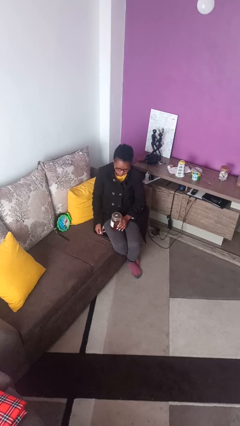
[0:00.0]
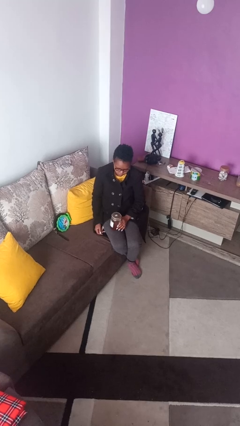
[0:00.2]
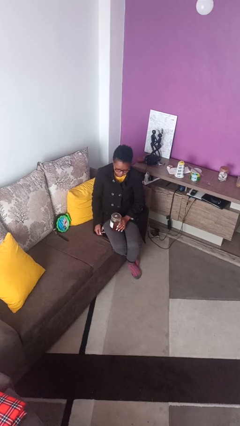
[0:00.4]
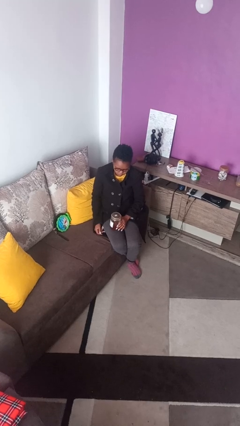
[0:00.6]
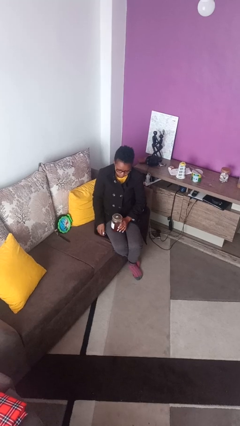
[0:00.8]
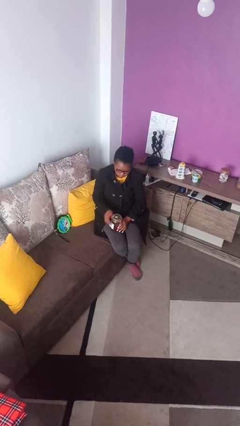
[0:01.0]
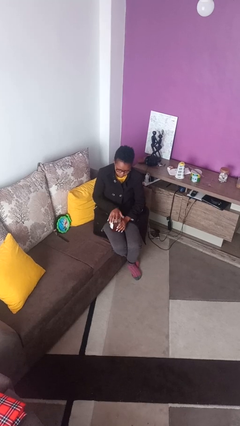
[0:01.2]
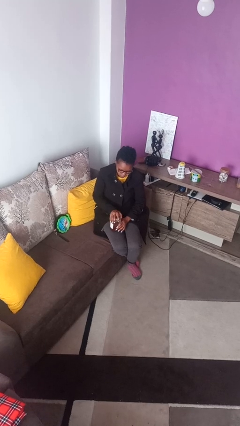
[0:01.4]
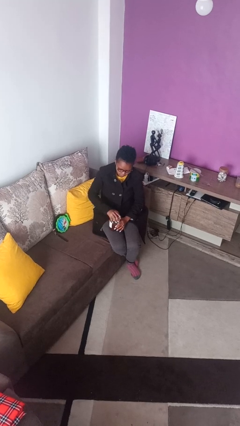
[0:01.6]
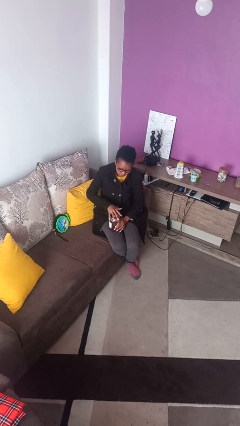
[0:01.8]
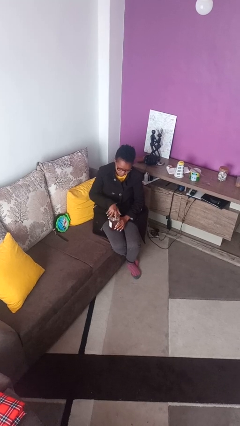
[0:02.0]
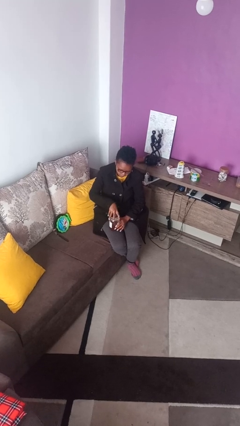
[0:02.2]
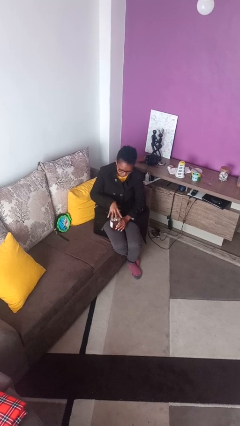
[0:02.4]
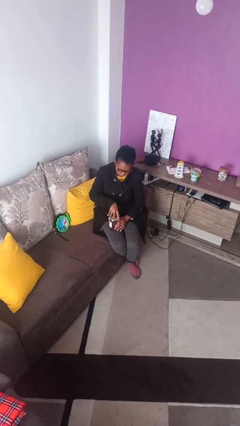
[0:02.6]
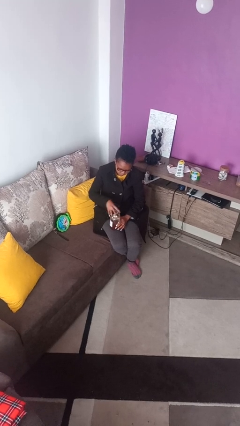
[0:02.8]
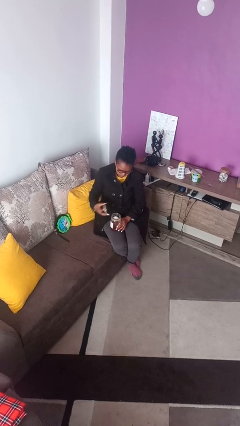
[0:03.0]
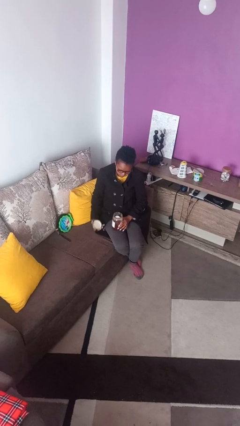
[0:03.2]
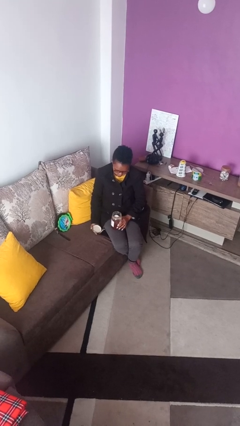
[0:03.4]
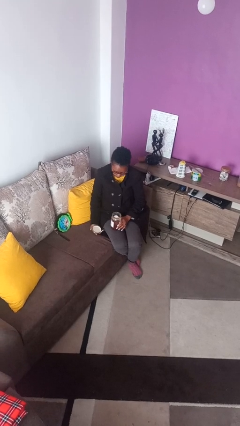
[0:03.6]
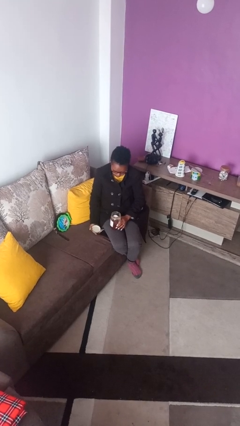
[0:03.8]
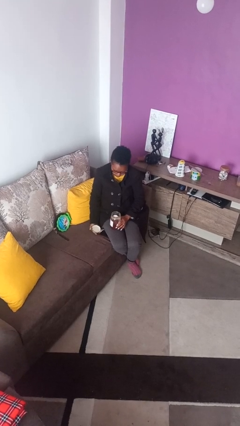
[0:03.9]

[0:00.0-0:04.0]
person opens jar

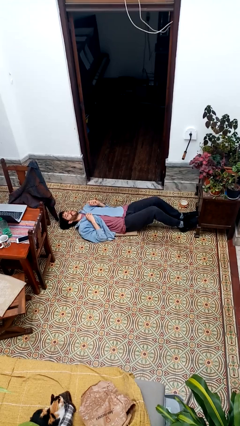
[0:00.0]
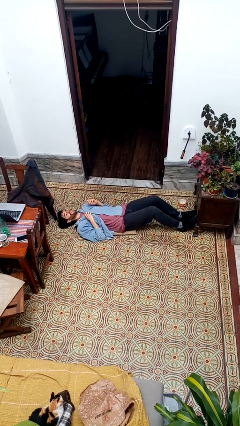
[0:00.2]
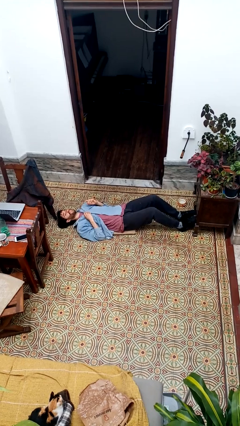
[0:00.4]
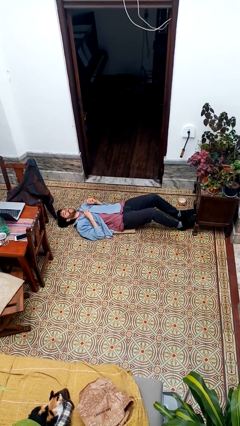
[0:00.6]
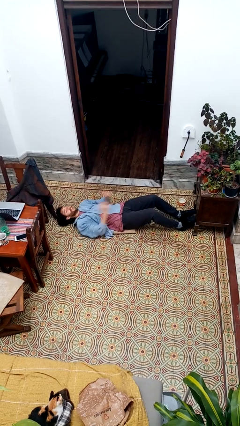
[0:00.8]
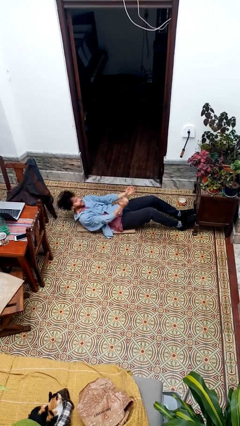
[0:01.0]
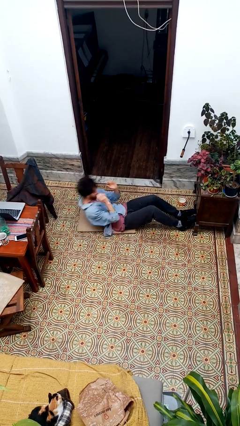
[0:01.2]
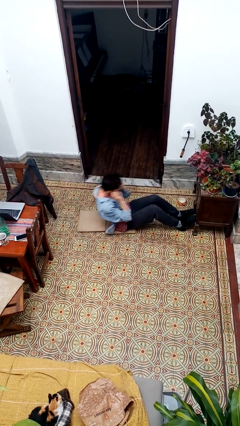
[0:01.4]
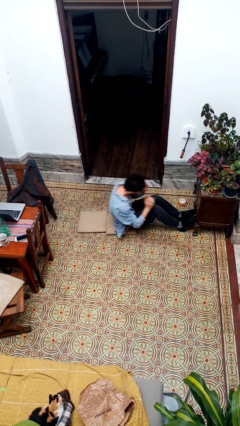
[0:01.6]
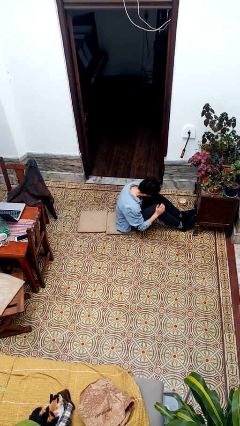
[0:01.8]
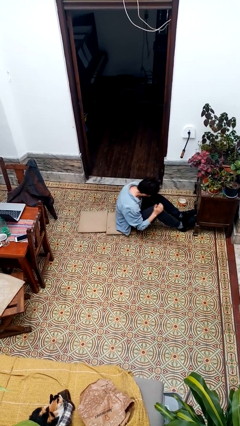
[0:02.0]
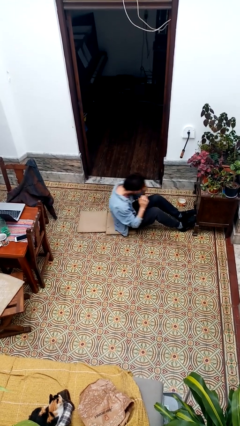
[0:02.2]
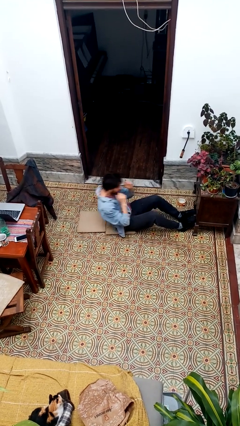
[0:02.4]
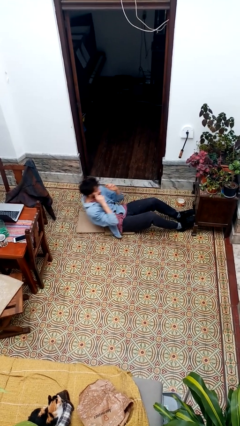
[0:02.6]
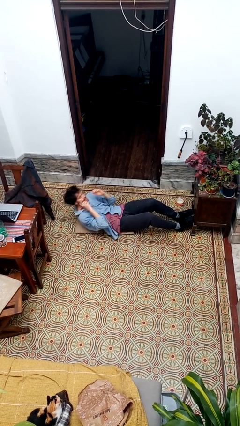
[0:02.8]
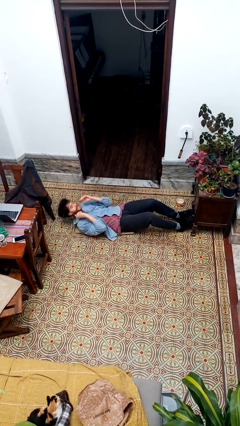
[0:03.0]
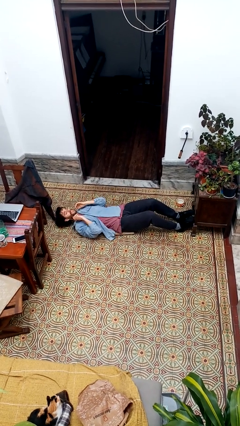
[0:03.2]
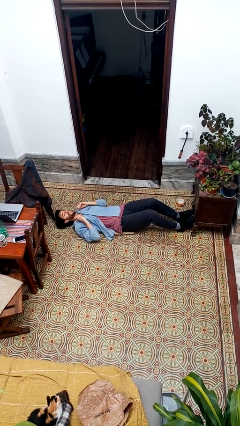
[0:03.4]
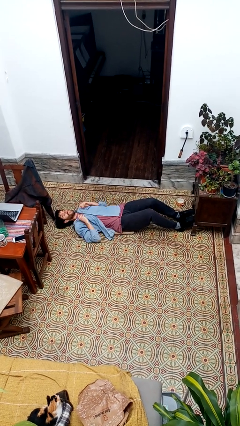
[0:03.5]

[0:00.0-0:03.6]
person exercises with situp

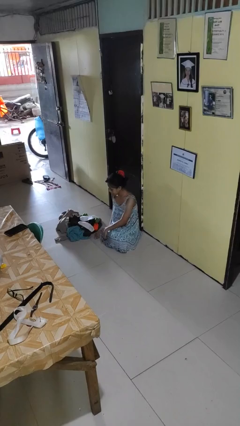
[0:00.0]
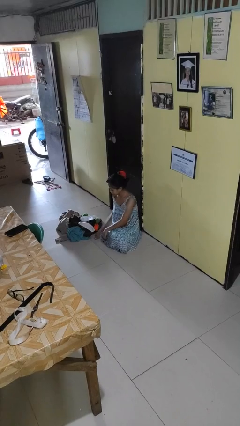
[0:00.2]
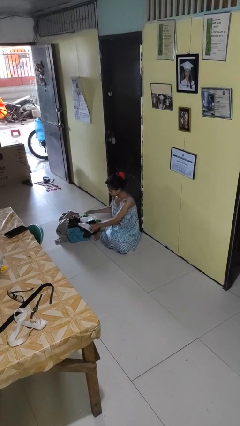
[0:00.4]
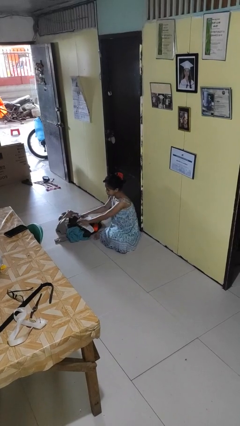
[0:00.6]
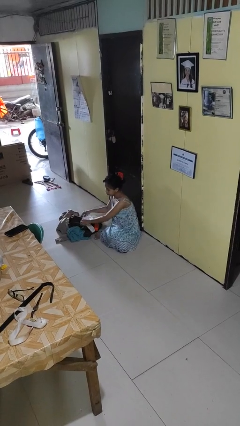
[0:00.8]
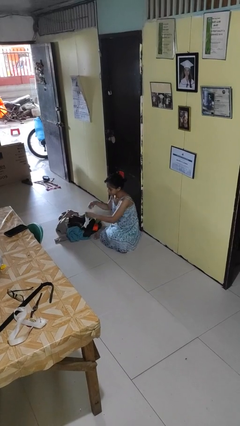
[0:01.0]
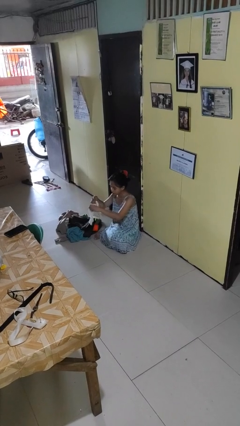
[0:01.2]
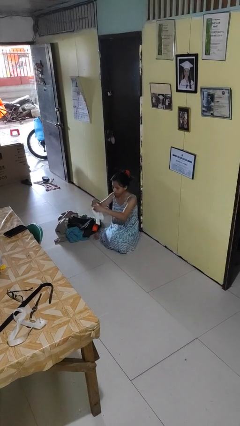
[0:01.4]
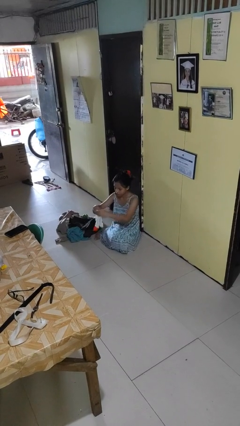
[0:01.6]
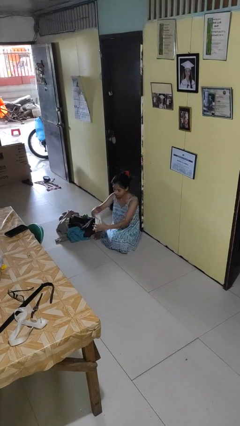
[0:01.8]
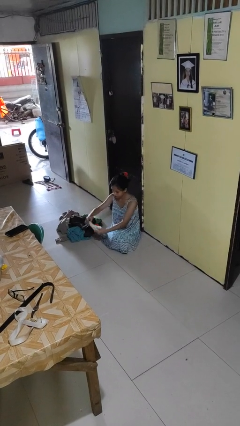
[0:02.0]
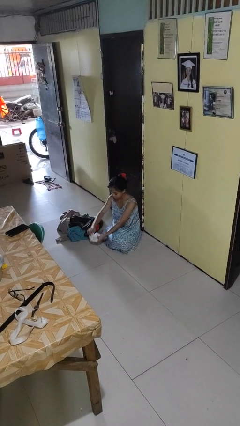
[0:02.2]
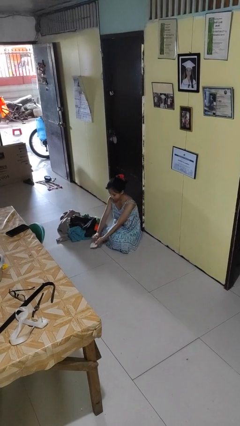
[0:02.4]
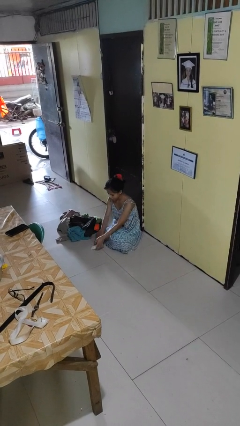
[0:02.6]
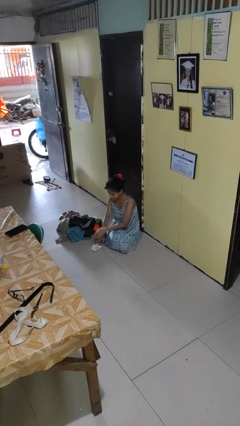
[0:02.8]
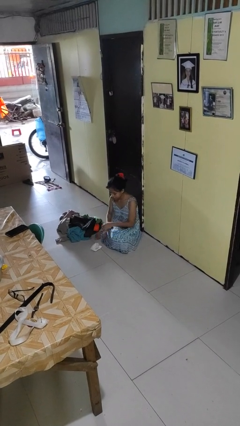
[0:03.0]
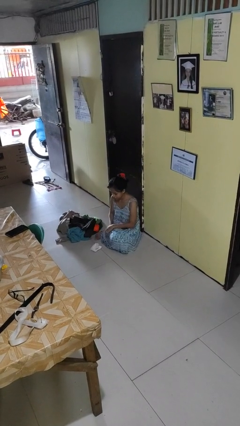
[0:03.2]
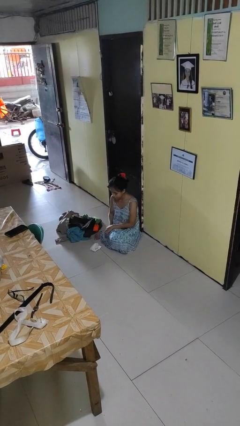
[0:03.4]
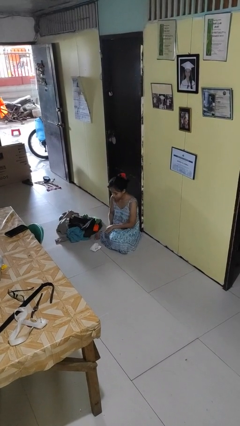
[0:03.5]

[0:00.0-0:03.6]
person folds socks

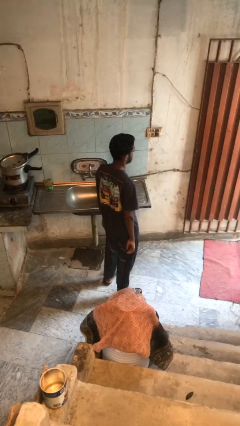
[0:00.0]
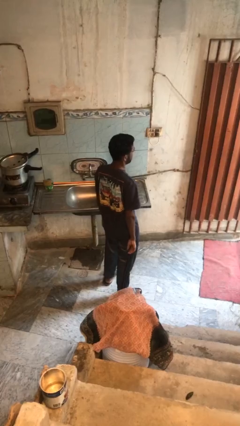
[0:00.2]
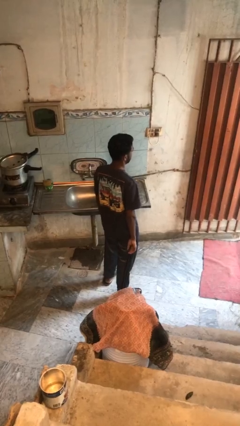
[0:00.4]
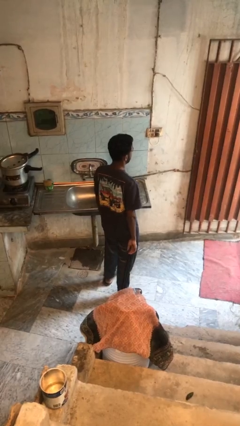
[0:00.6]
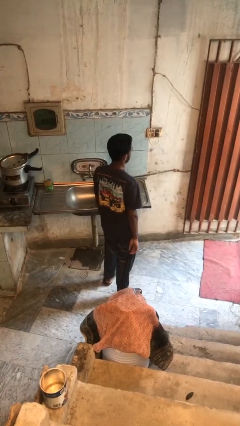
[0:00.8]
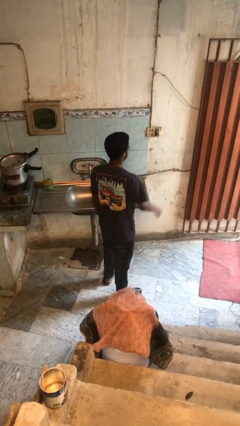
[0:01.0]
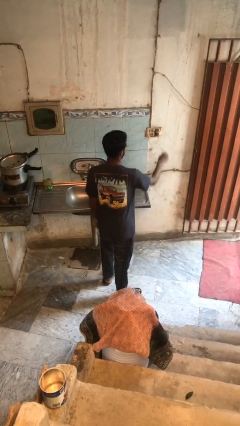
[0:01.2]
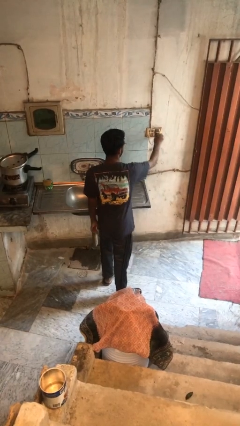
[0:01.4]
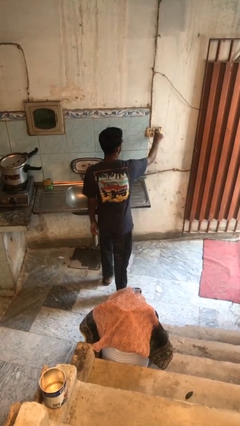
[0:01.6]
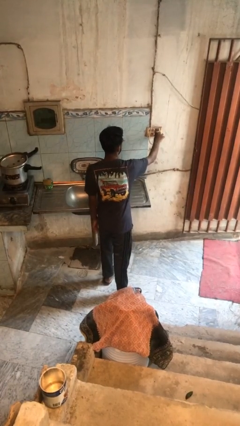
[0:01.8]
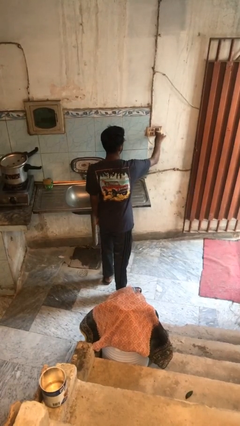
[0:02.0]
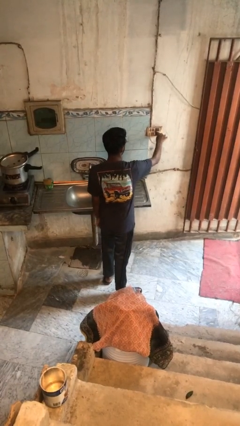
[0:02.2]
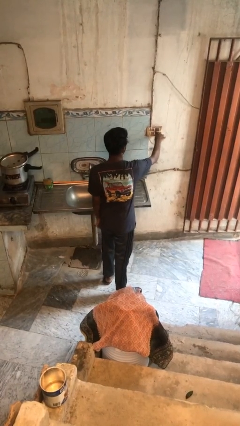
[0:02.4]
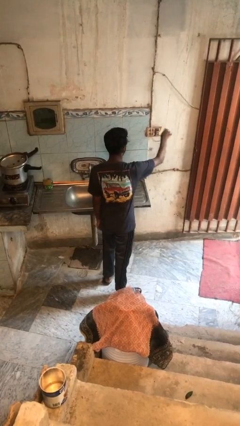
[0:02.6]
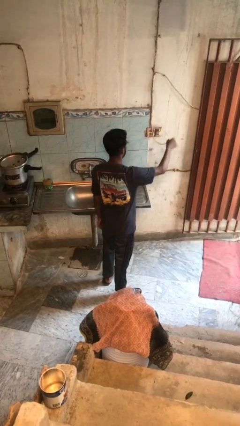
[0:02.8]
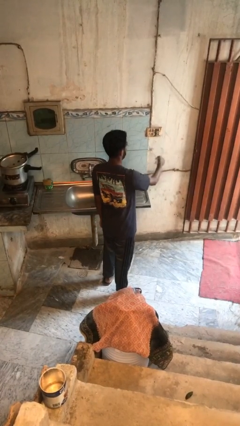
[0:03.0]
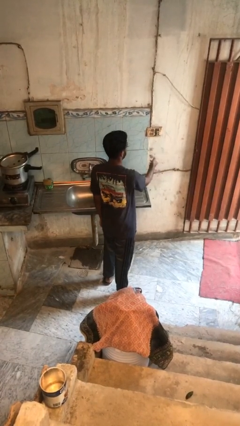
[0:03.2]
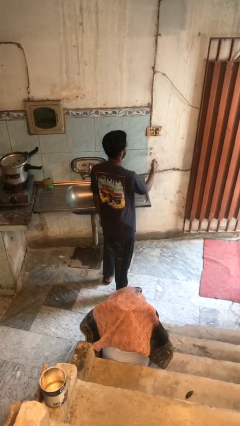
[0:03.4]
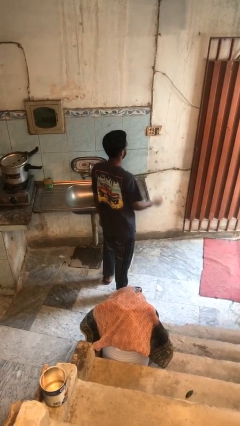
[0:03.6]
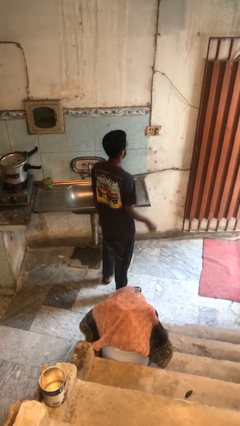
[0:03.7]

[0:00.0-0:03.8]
person unplugs from electrical socket

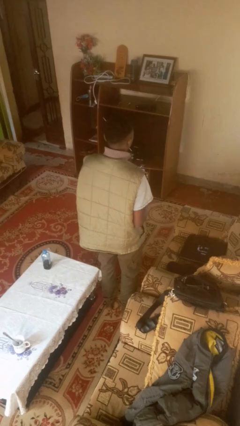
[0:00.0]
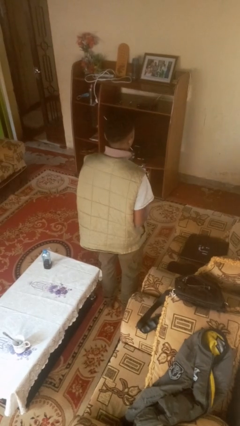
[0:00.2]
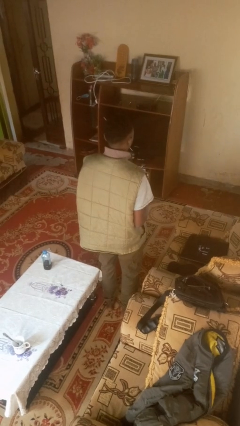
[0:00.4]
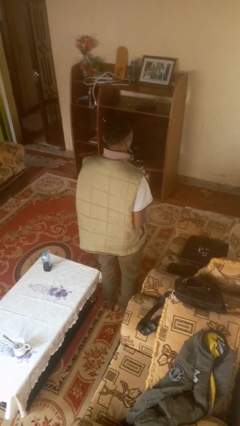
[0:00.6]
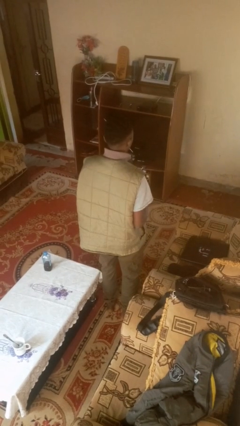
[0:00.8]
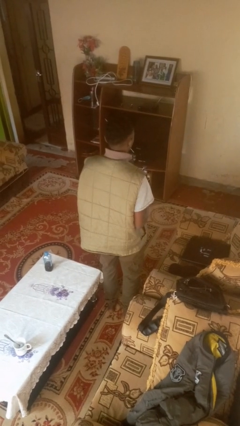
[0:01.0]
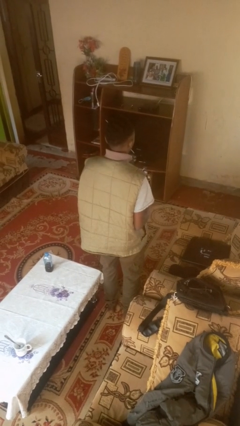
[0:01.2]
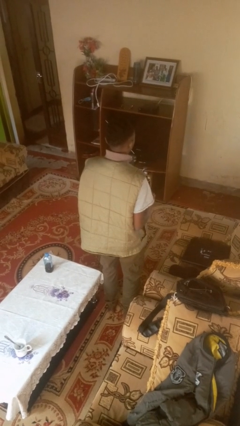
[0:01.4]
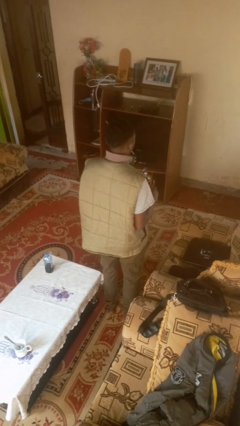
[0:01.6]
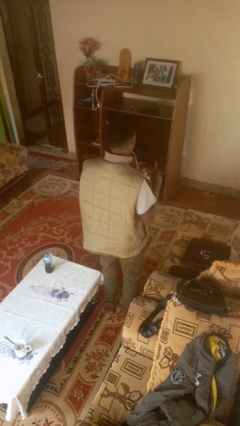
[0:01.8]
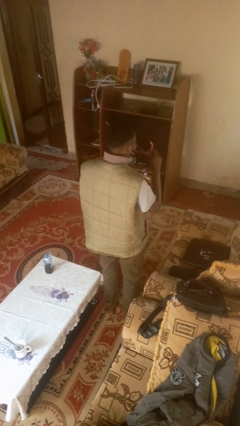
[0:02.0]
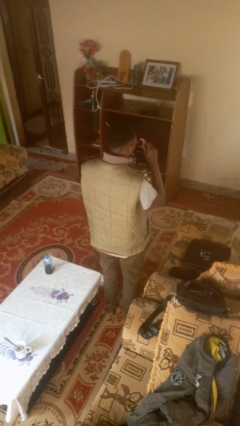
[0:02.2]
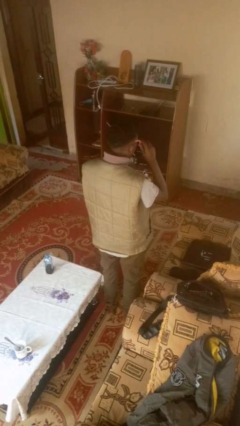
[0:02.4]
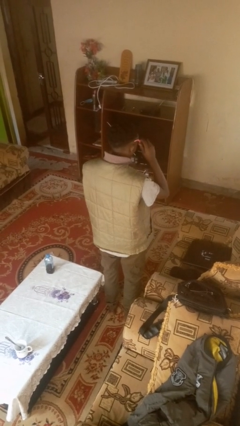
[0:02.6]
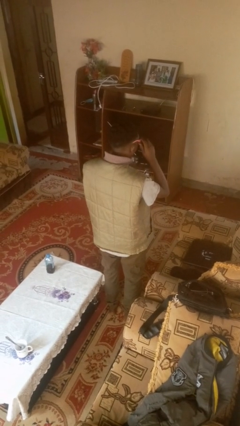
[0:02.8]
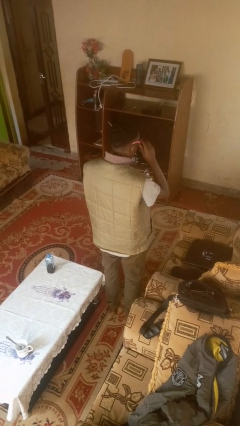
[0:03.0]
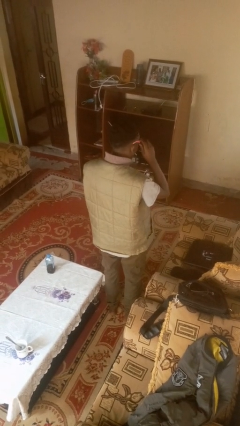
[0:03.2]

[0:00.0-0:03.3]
person puts on sunglasses
